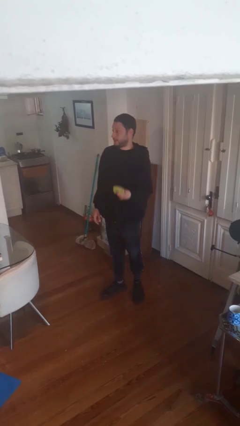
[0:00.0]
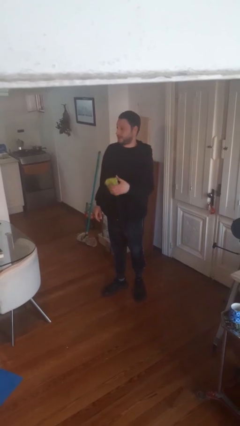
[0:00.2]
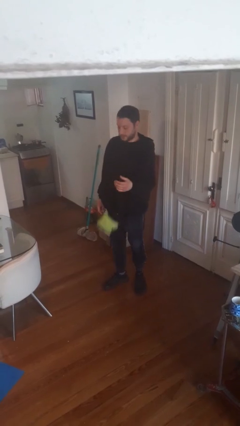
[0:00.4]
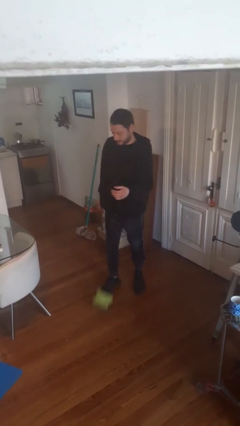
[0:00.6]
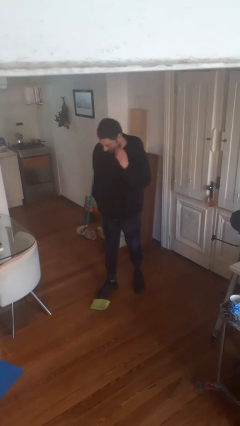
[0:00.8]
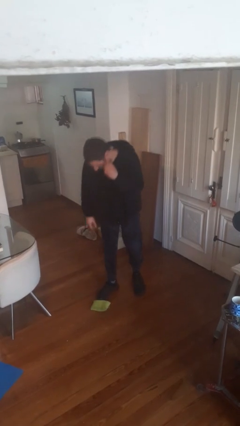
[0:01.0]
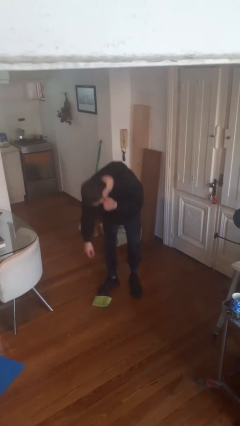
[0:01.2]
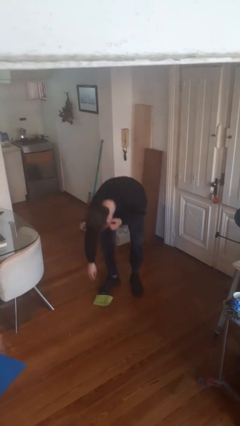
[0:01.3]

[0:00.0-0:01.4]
person drops object

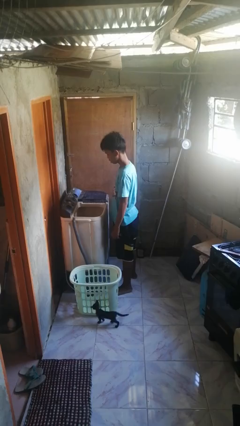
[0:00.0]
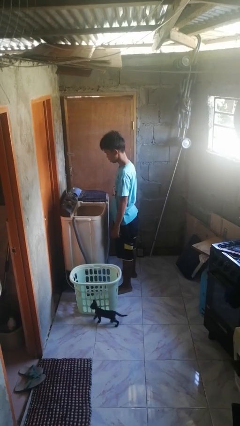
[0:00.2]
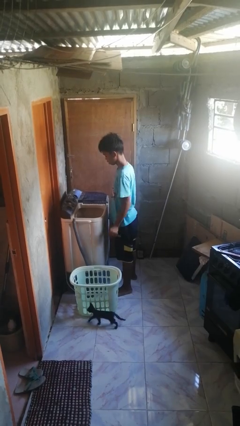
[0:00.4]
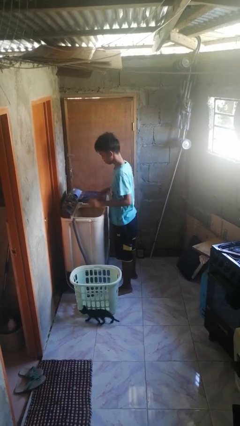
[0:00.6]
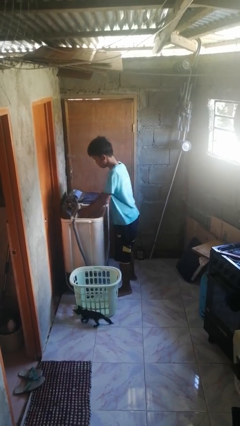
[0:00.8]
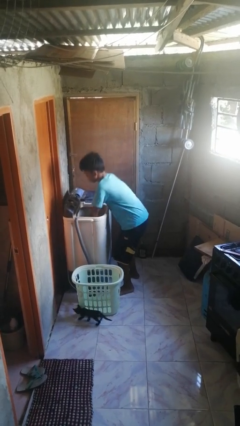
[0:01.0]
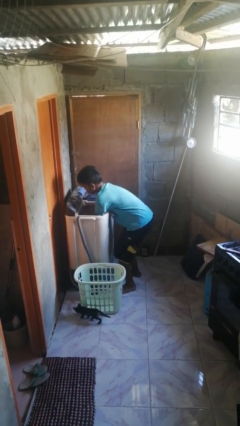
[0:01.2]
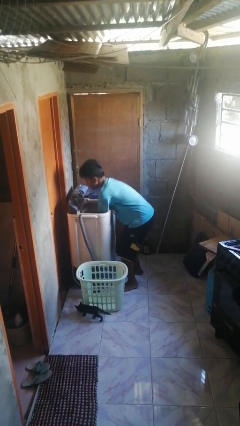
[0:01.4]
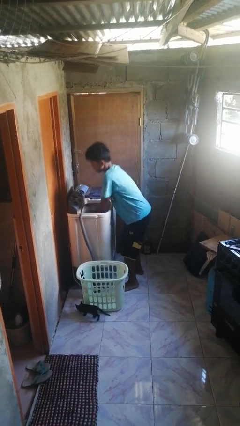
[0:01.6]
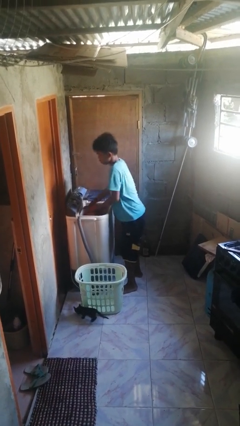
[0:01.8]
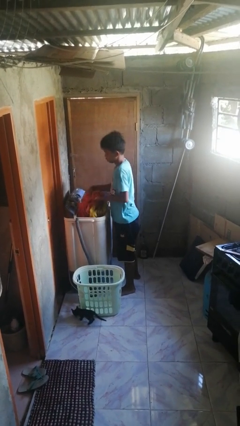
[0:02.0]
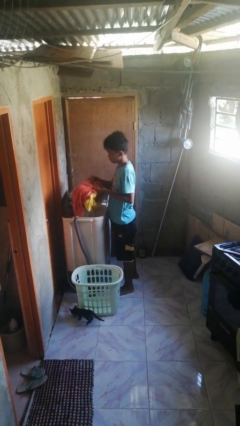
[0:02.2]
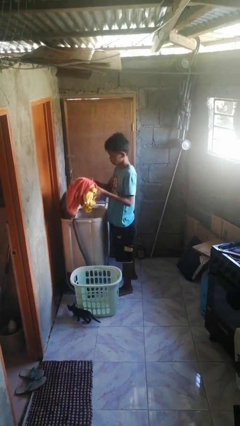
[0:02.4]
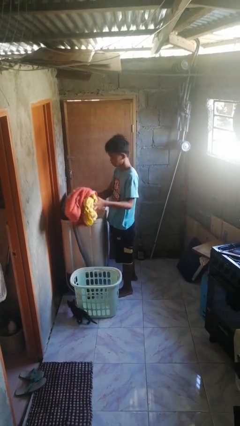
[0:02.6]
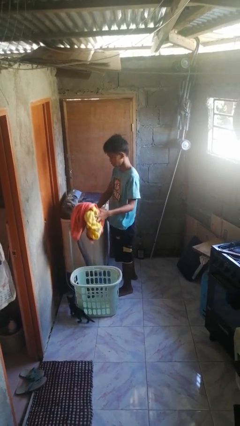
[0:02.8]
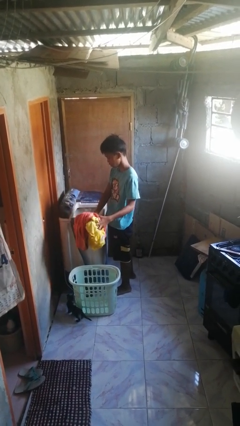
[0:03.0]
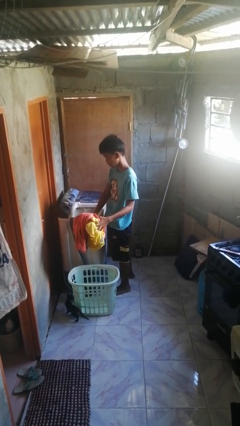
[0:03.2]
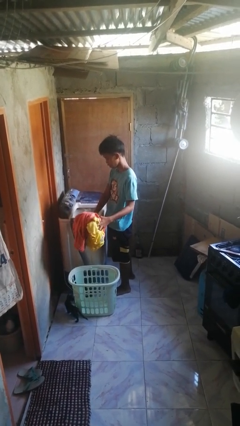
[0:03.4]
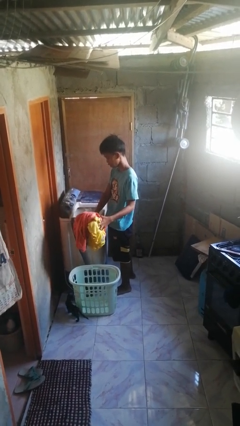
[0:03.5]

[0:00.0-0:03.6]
person unloads clotheswasher

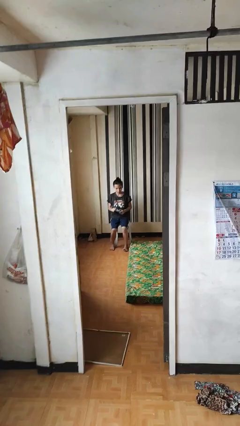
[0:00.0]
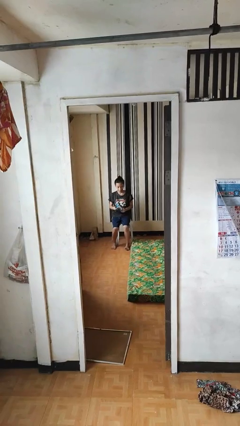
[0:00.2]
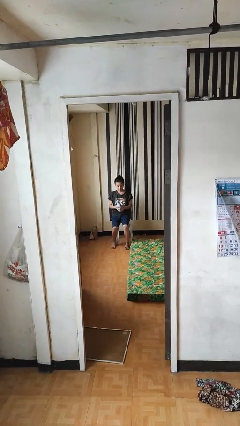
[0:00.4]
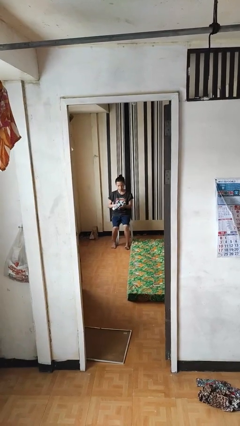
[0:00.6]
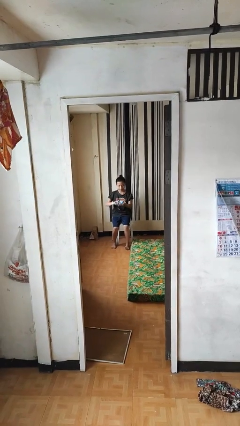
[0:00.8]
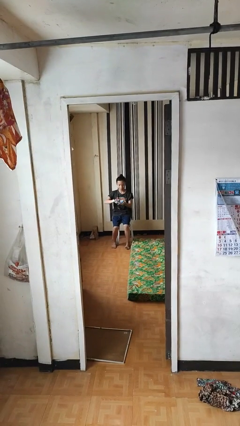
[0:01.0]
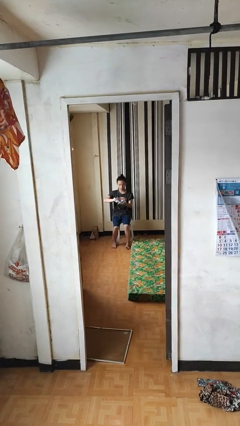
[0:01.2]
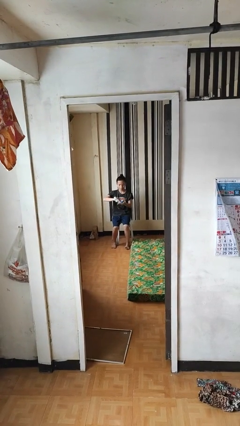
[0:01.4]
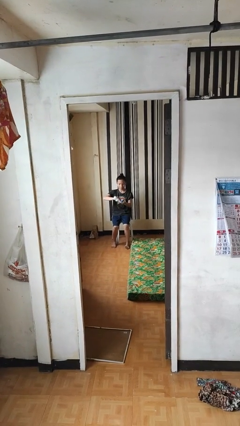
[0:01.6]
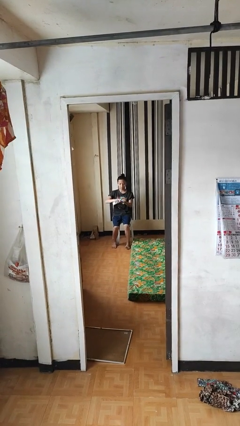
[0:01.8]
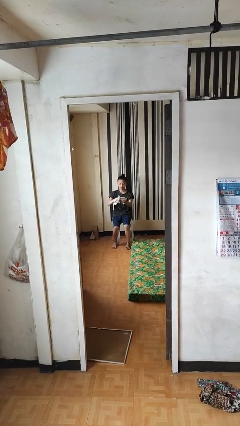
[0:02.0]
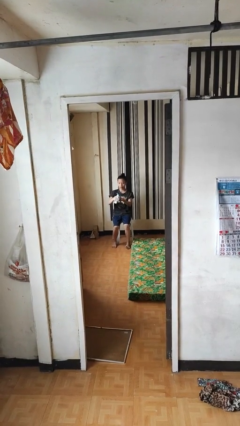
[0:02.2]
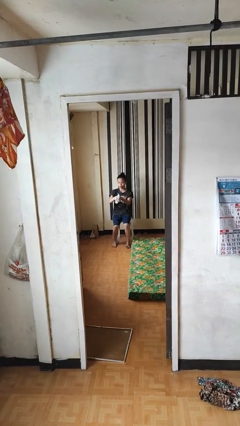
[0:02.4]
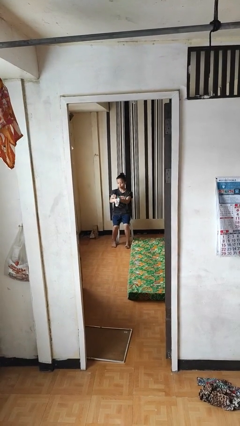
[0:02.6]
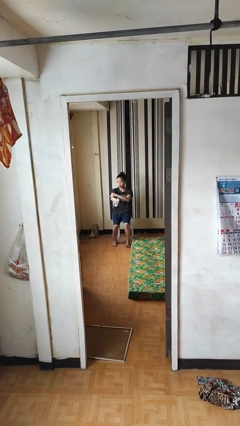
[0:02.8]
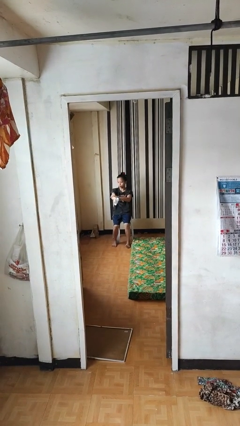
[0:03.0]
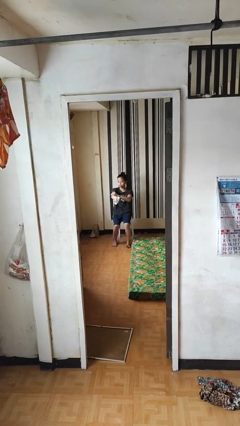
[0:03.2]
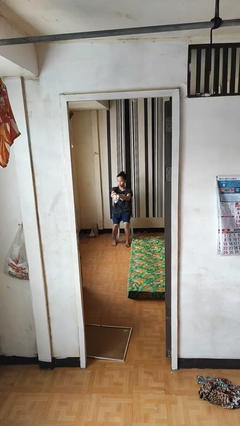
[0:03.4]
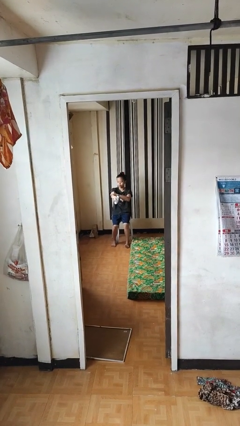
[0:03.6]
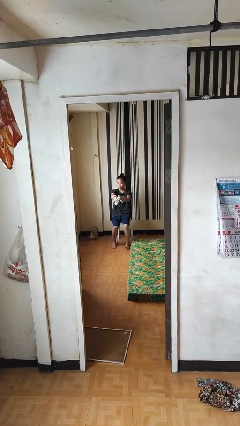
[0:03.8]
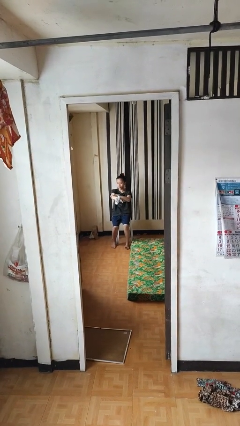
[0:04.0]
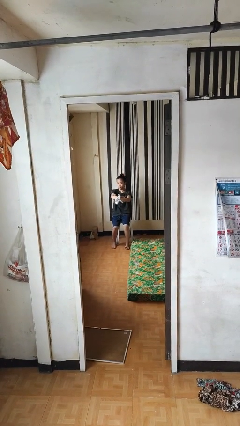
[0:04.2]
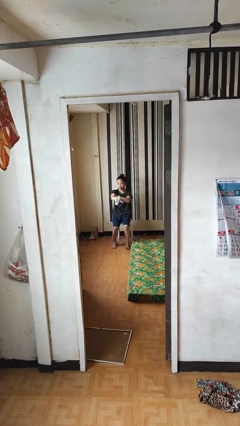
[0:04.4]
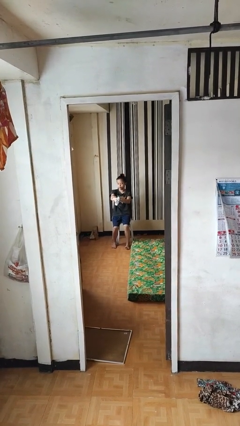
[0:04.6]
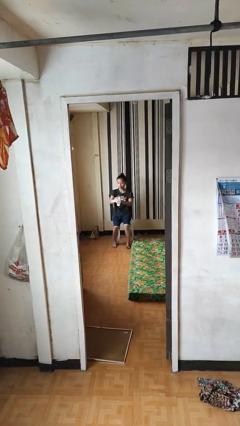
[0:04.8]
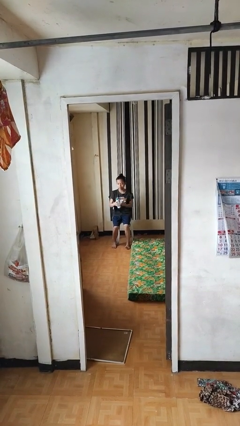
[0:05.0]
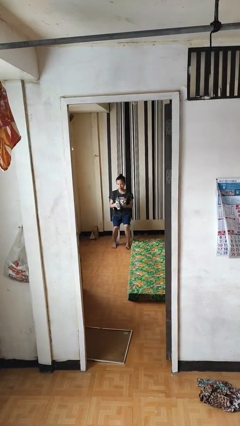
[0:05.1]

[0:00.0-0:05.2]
person applies sunscreen

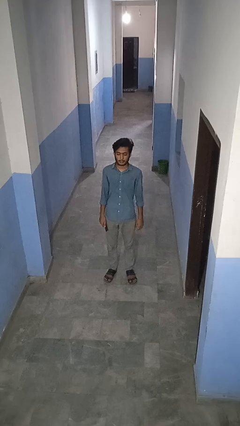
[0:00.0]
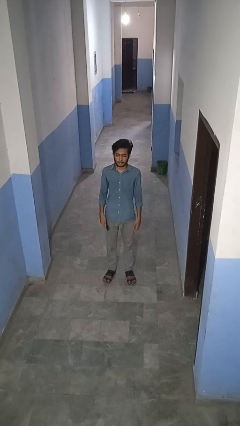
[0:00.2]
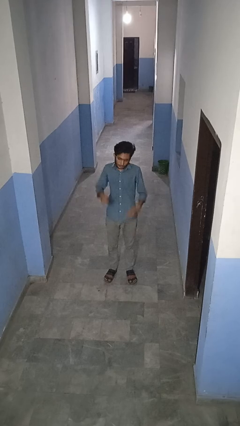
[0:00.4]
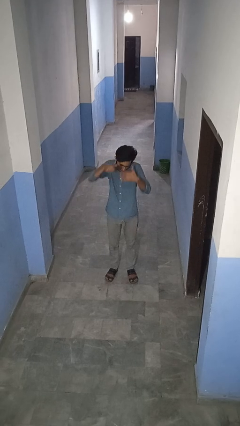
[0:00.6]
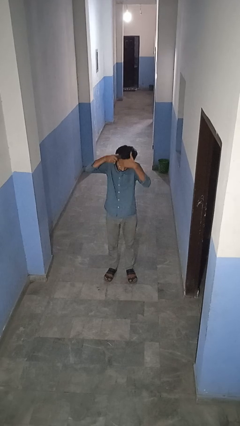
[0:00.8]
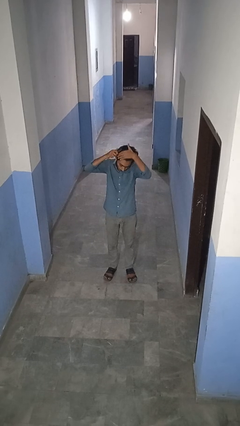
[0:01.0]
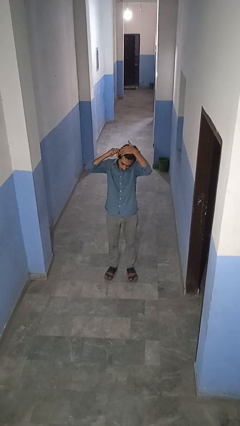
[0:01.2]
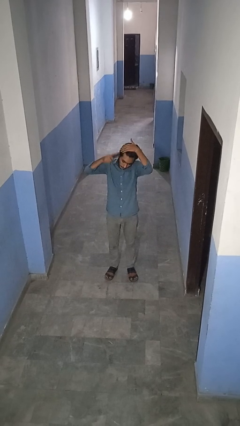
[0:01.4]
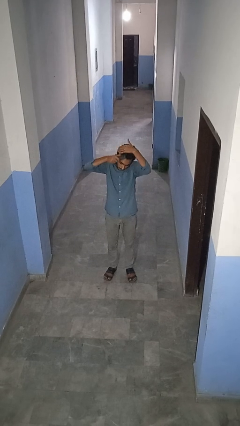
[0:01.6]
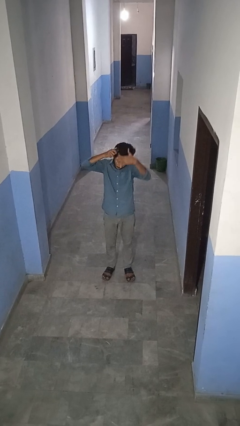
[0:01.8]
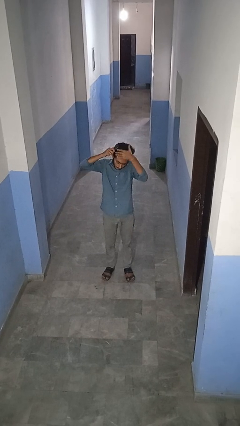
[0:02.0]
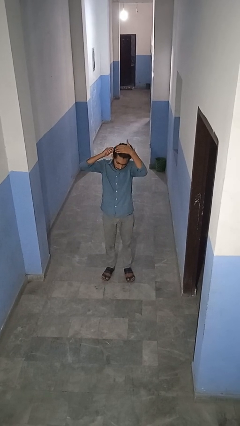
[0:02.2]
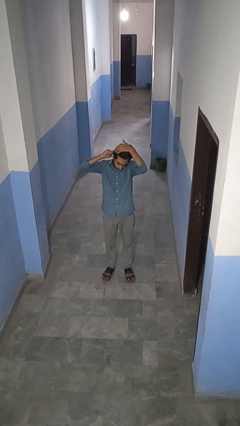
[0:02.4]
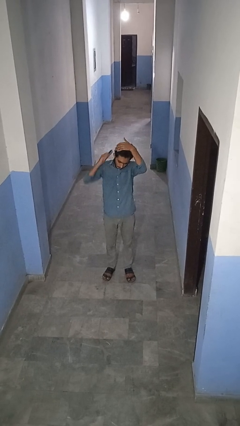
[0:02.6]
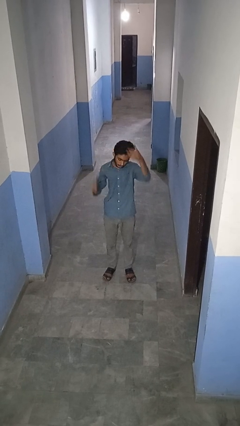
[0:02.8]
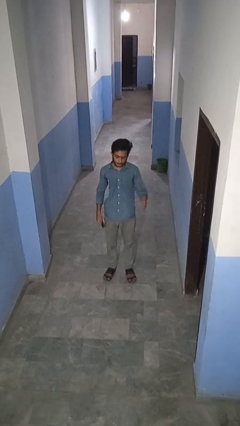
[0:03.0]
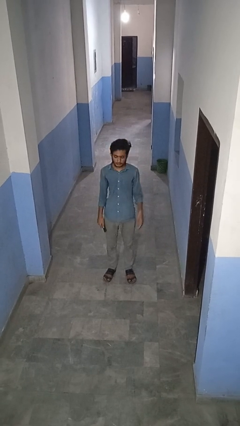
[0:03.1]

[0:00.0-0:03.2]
person brushes hair

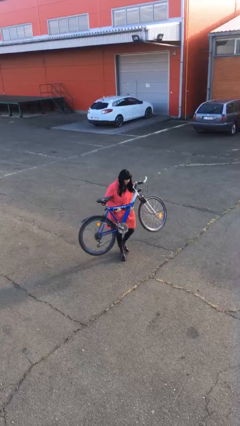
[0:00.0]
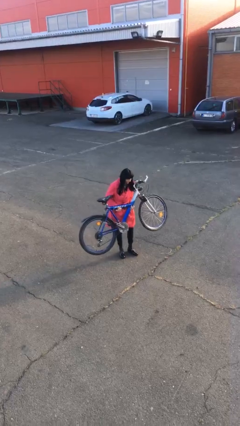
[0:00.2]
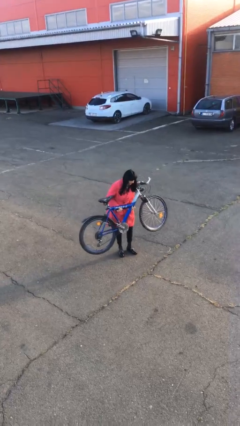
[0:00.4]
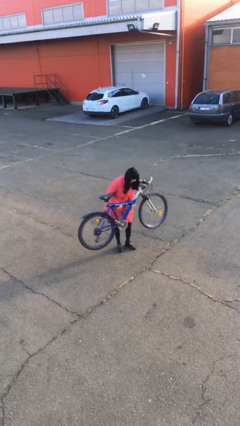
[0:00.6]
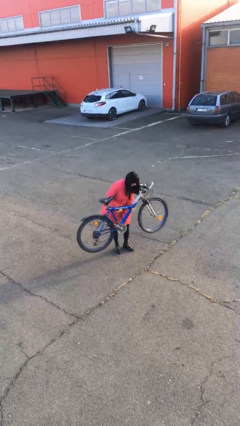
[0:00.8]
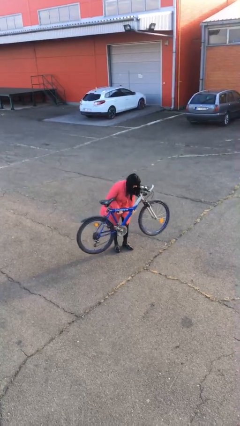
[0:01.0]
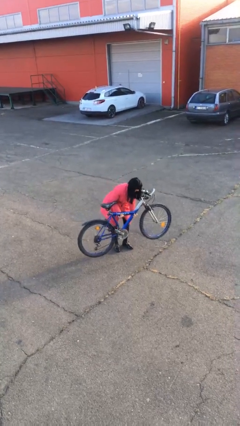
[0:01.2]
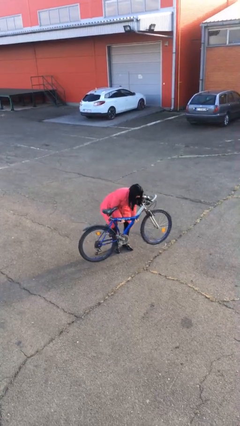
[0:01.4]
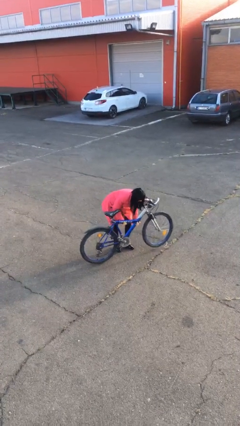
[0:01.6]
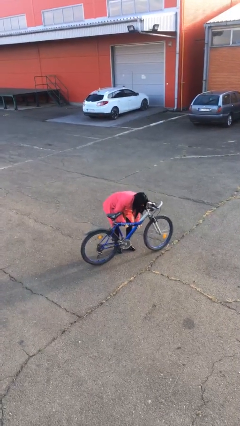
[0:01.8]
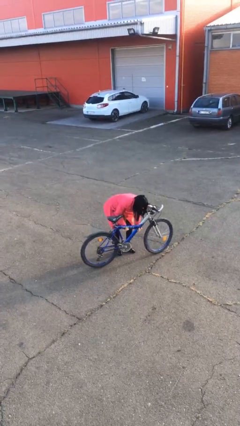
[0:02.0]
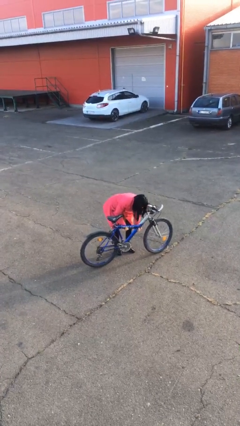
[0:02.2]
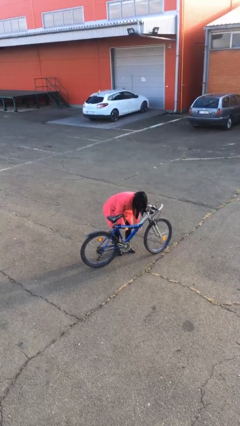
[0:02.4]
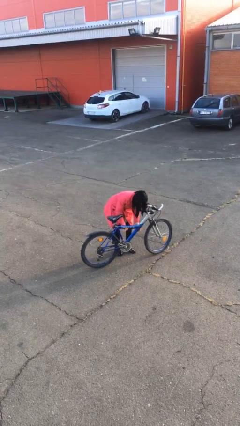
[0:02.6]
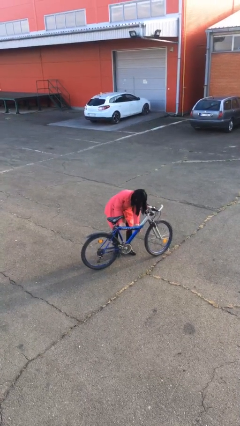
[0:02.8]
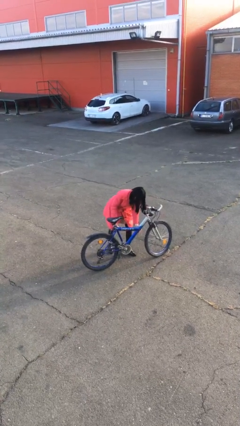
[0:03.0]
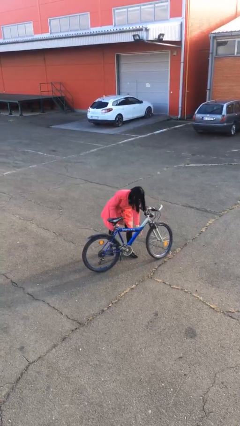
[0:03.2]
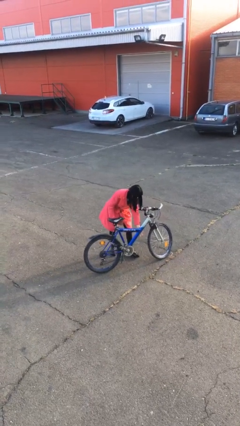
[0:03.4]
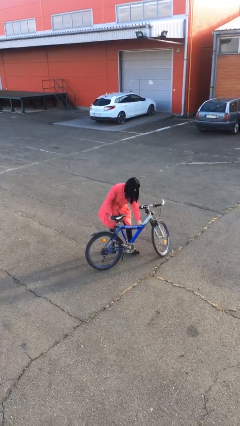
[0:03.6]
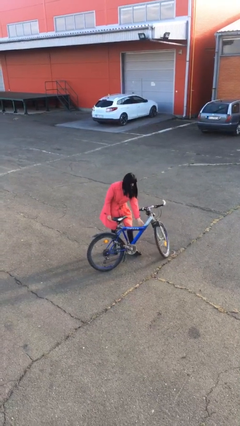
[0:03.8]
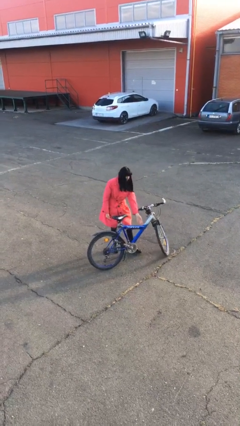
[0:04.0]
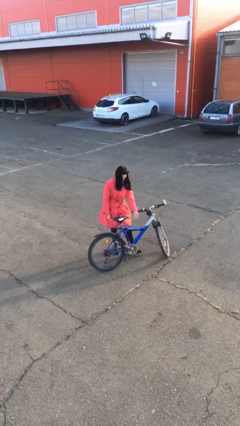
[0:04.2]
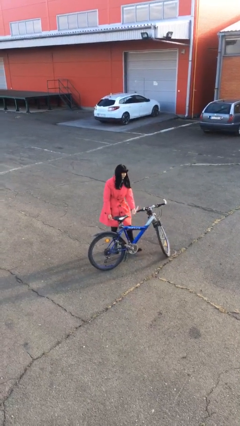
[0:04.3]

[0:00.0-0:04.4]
person puts down object on floor
